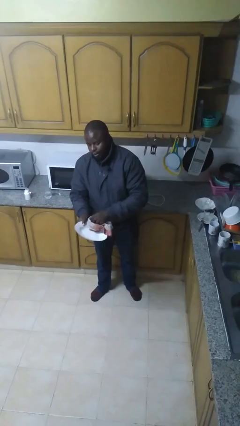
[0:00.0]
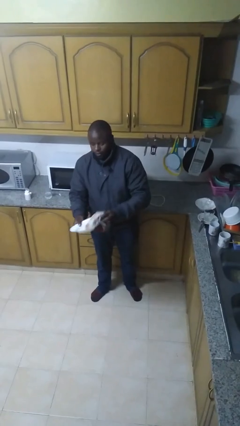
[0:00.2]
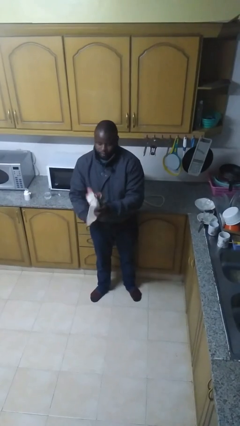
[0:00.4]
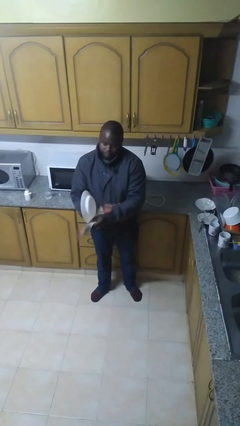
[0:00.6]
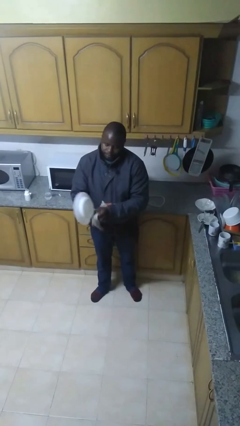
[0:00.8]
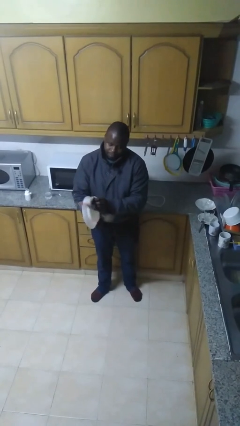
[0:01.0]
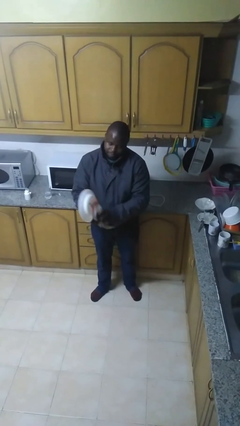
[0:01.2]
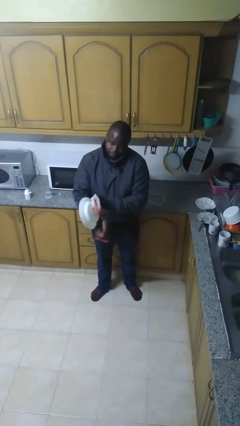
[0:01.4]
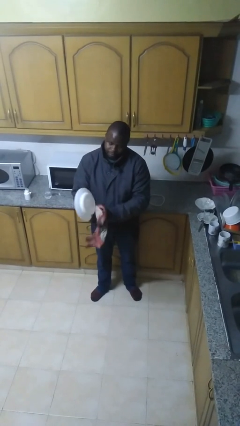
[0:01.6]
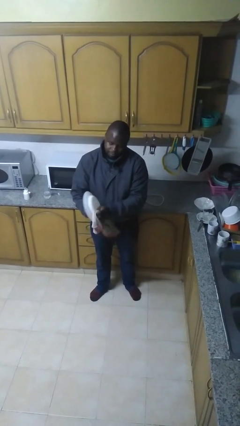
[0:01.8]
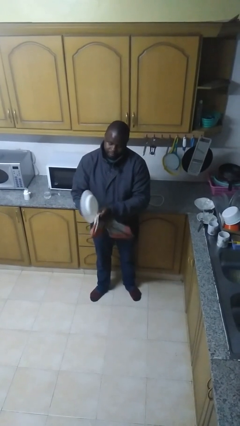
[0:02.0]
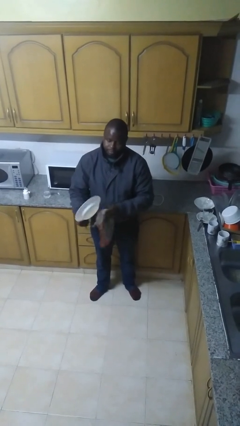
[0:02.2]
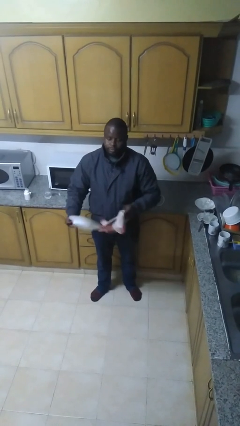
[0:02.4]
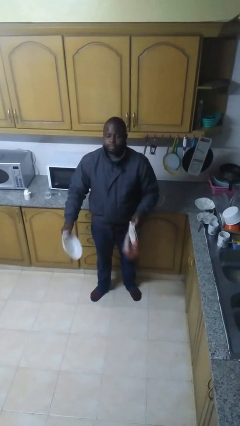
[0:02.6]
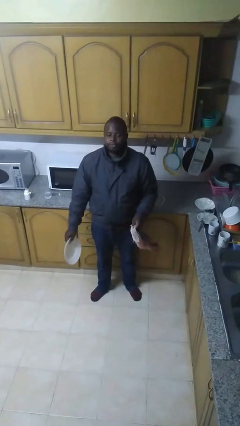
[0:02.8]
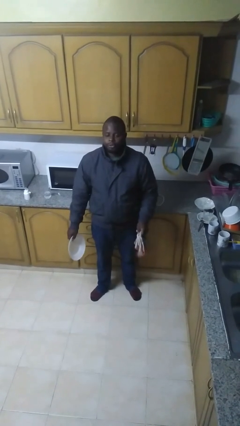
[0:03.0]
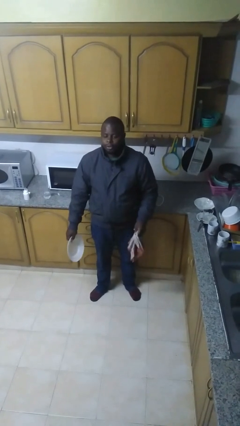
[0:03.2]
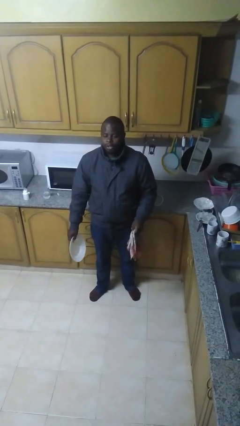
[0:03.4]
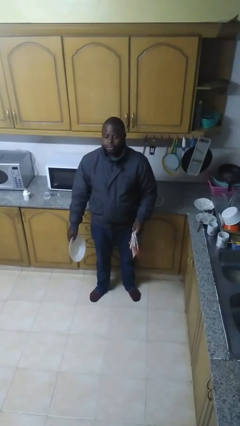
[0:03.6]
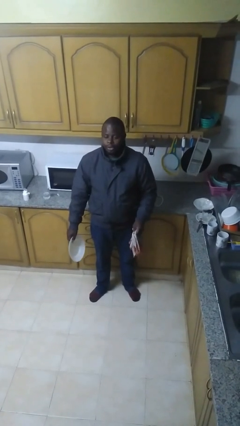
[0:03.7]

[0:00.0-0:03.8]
person dries dish

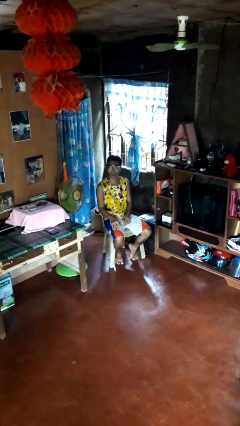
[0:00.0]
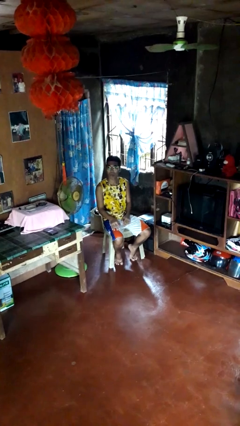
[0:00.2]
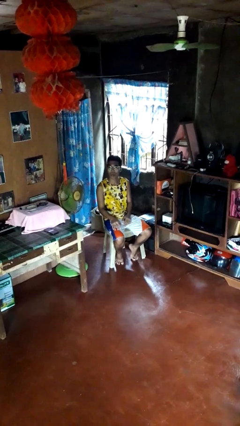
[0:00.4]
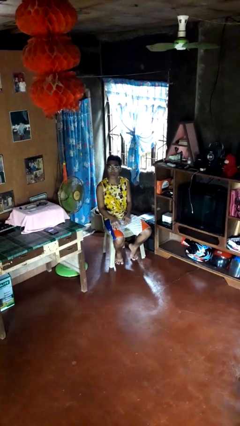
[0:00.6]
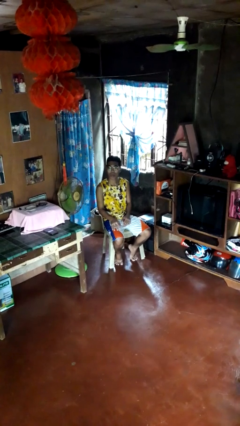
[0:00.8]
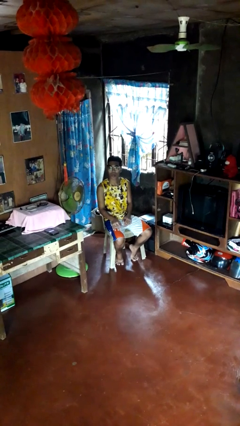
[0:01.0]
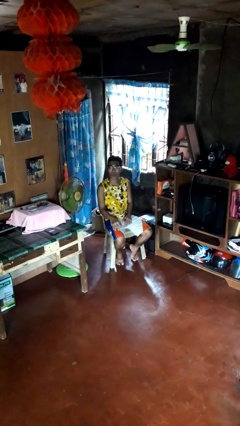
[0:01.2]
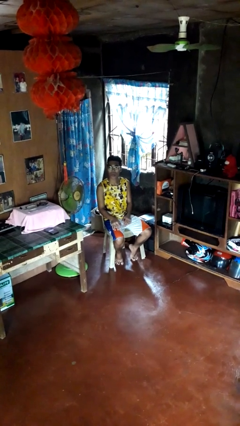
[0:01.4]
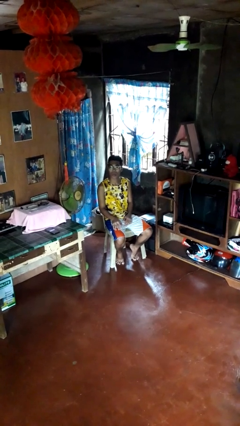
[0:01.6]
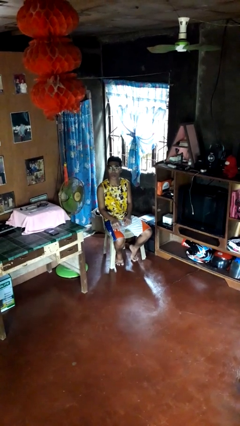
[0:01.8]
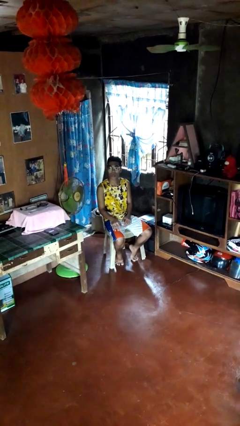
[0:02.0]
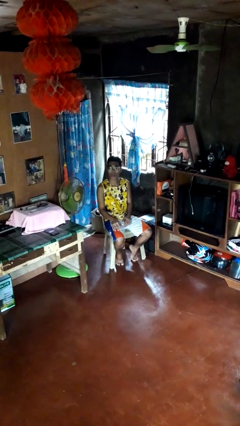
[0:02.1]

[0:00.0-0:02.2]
person sticks out tongue

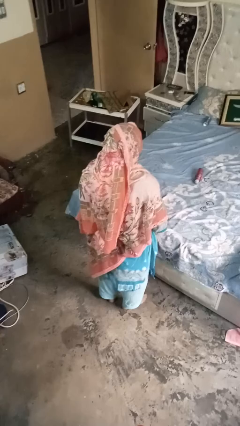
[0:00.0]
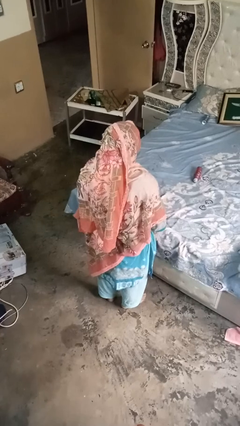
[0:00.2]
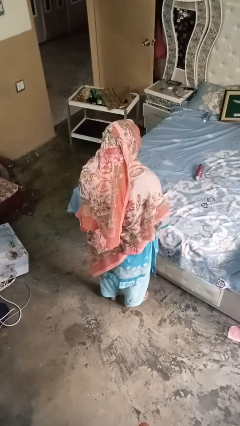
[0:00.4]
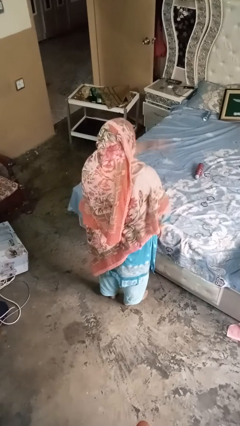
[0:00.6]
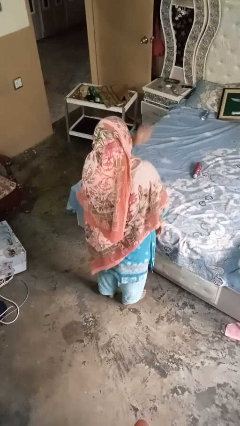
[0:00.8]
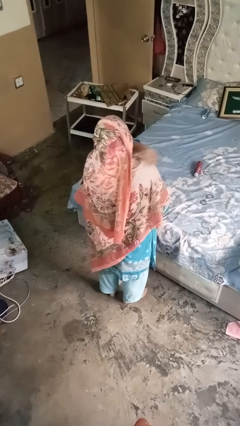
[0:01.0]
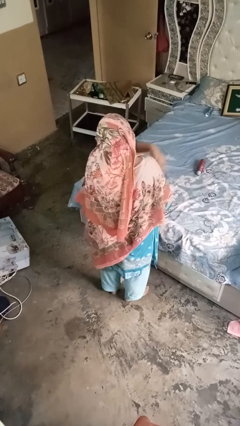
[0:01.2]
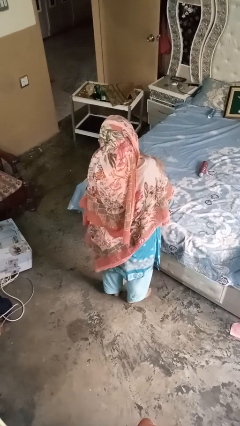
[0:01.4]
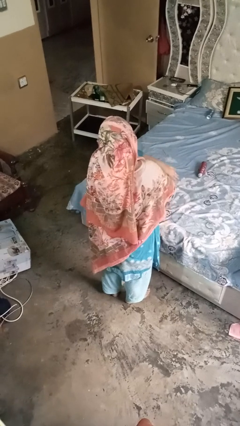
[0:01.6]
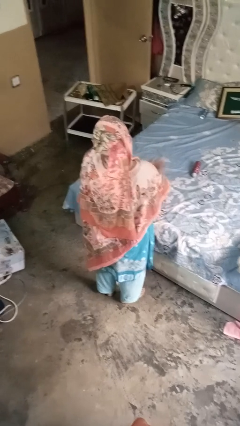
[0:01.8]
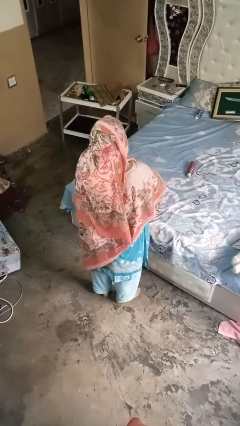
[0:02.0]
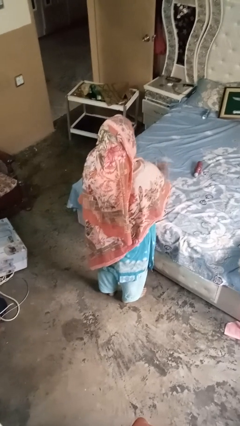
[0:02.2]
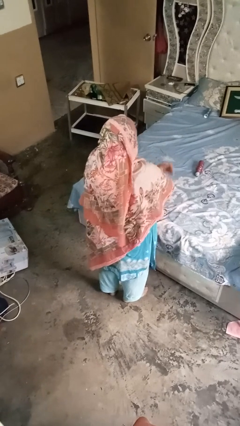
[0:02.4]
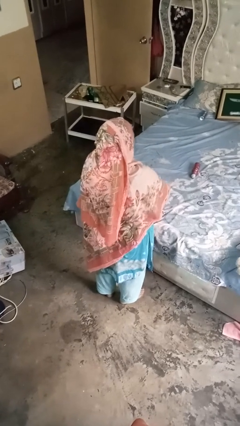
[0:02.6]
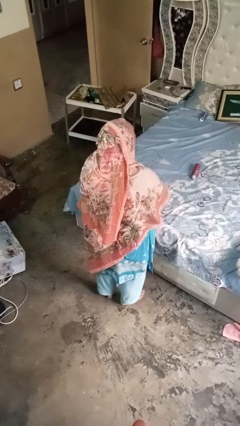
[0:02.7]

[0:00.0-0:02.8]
person swats bug

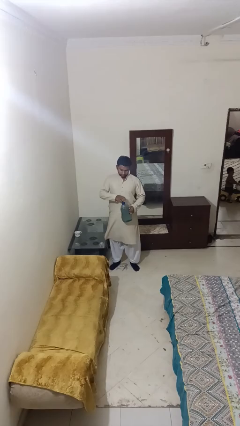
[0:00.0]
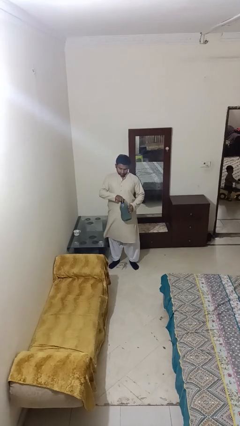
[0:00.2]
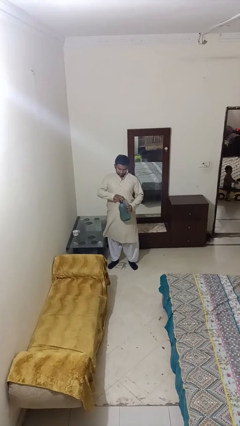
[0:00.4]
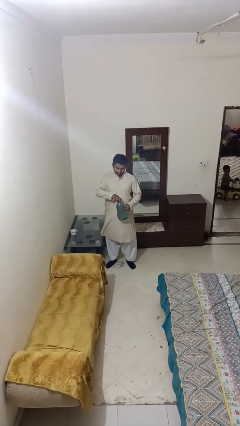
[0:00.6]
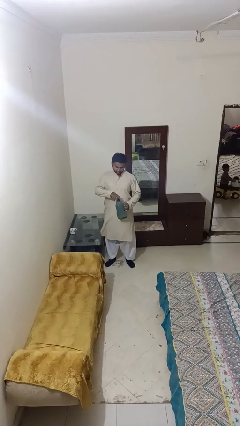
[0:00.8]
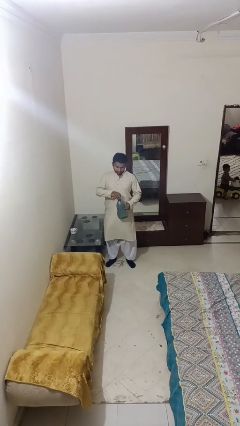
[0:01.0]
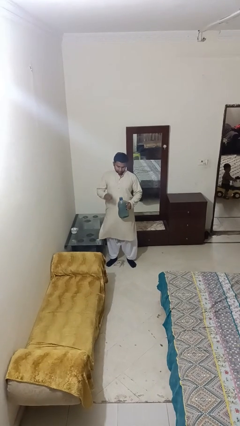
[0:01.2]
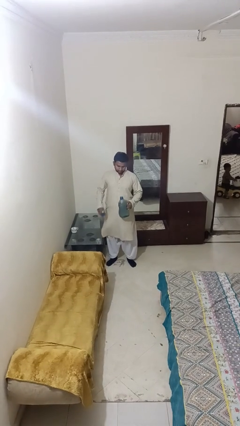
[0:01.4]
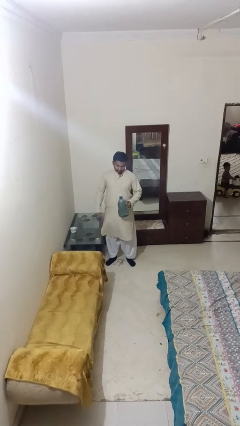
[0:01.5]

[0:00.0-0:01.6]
person unscrews lid from bottle

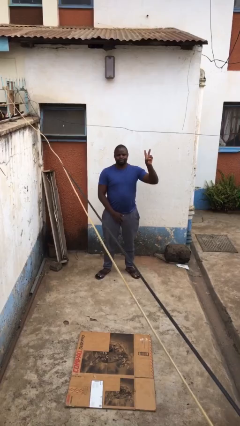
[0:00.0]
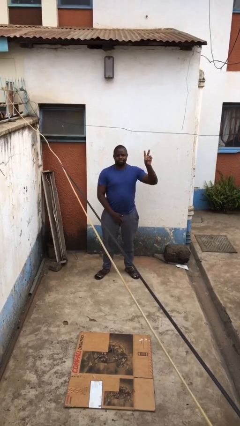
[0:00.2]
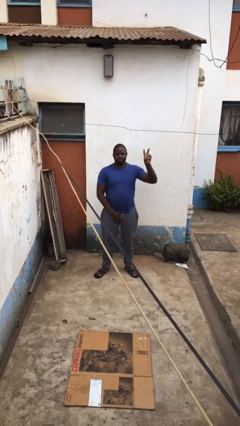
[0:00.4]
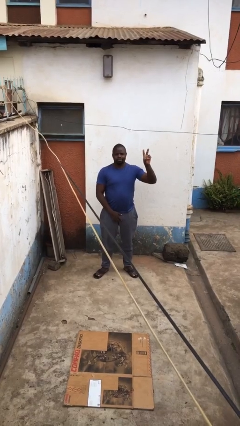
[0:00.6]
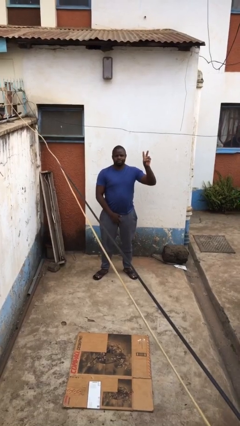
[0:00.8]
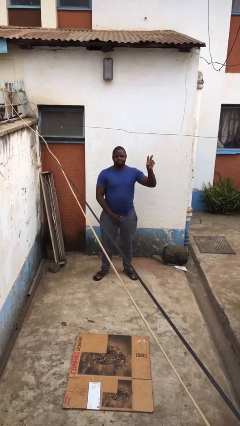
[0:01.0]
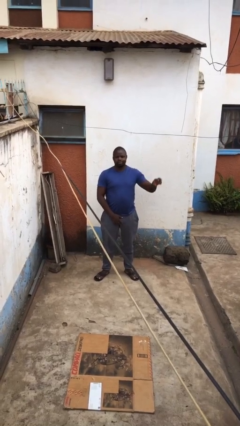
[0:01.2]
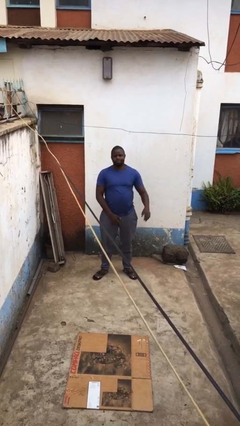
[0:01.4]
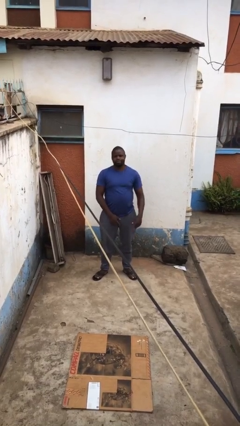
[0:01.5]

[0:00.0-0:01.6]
person gestures peace

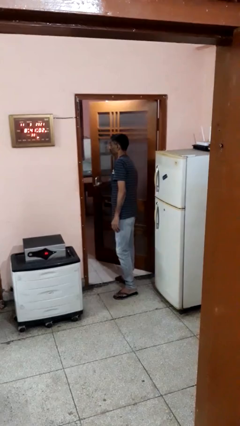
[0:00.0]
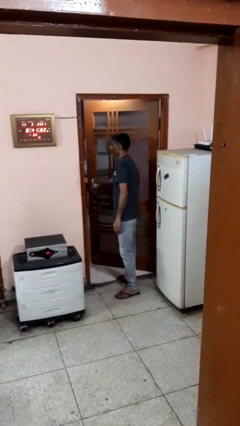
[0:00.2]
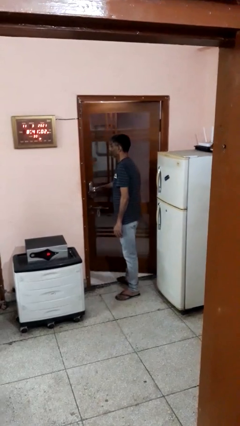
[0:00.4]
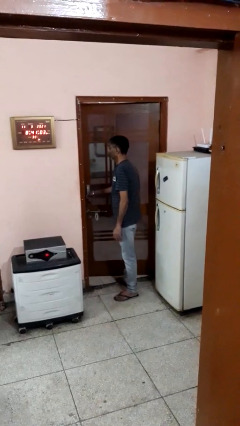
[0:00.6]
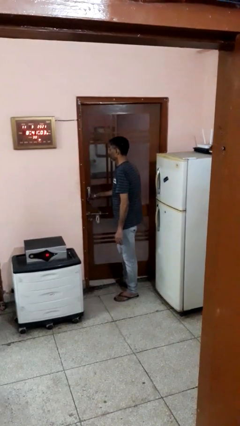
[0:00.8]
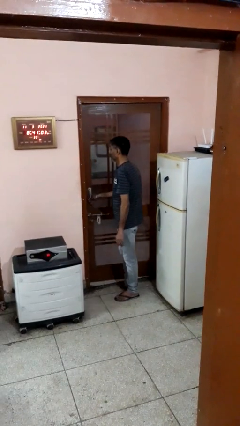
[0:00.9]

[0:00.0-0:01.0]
person closes facility door

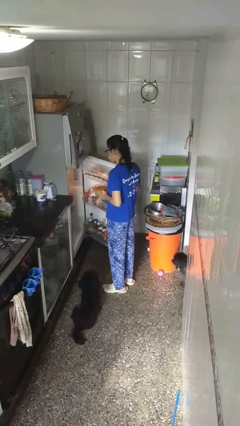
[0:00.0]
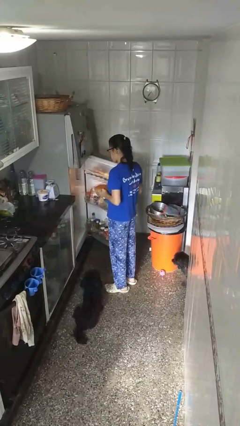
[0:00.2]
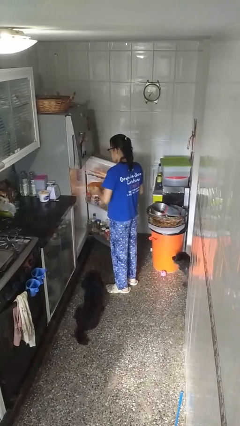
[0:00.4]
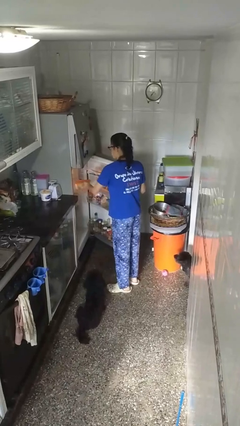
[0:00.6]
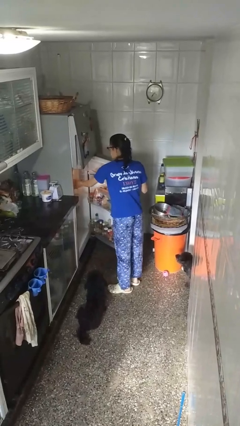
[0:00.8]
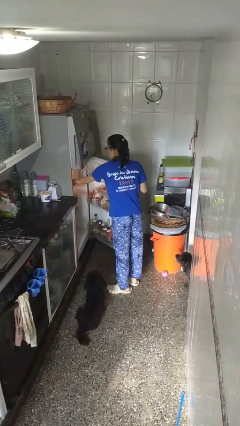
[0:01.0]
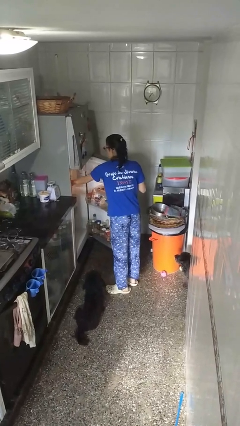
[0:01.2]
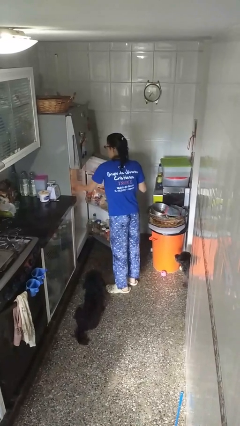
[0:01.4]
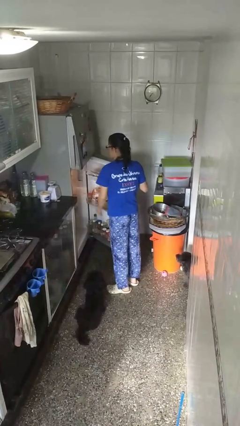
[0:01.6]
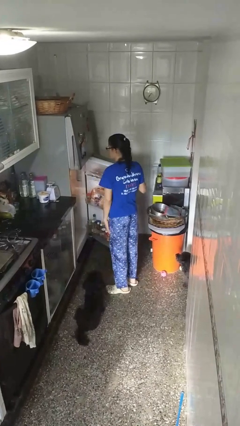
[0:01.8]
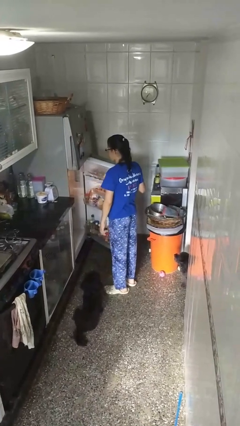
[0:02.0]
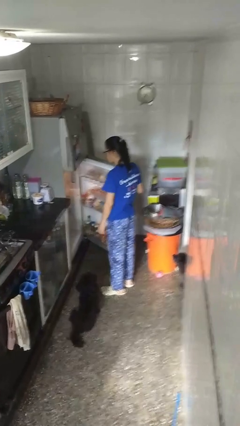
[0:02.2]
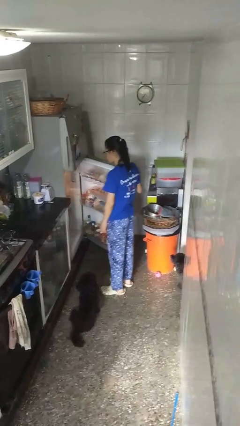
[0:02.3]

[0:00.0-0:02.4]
person puts object into refrigerator

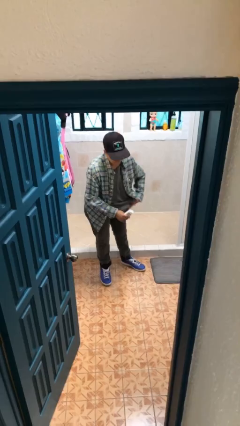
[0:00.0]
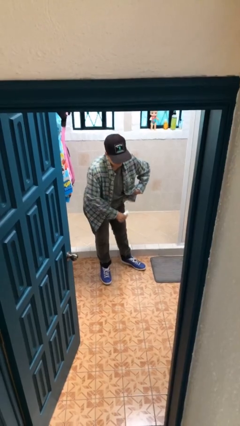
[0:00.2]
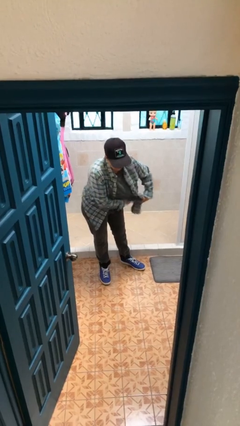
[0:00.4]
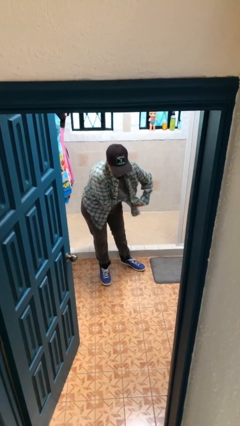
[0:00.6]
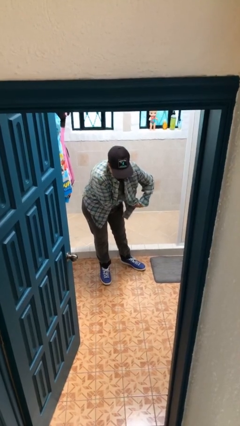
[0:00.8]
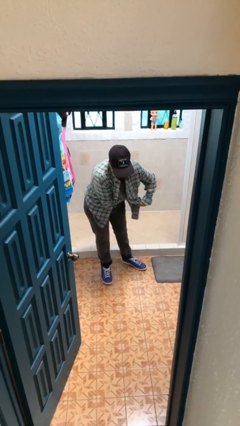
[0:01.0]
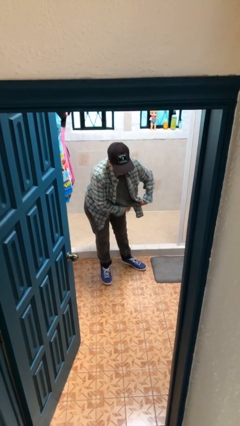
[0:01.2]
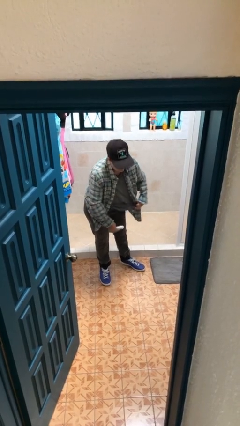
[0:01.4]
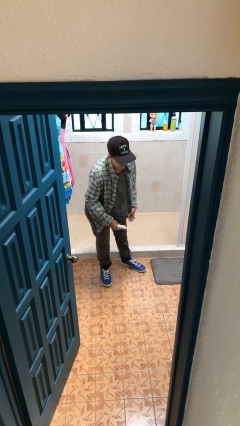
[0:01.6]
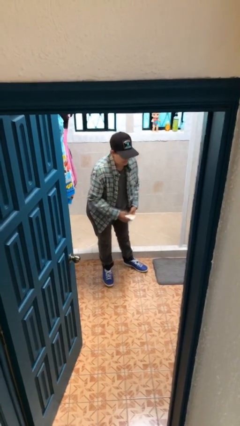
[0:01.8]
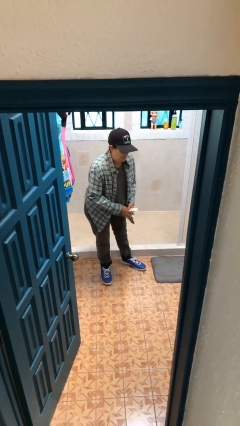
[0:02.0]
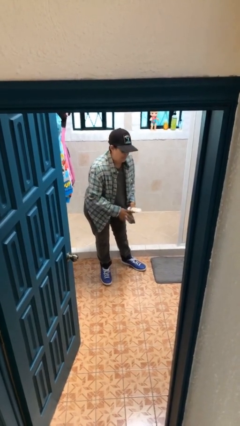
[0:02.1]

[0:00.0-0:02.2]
person applies deodorant
